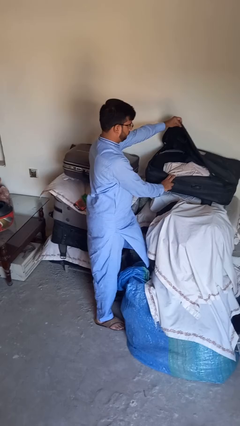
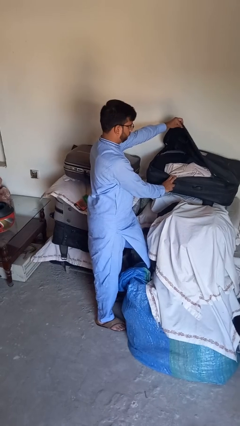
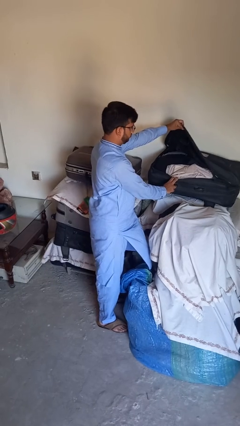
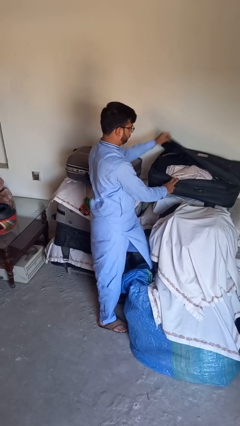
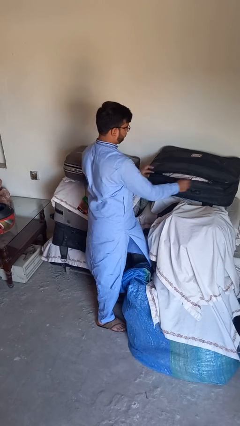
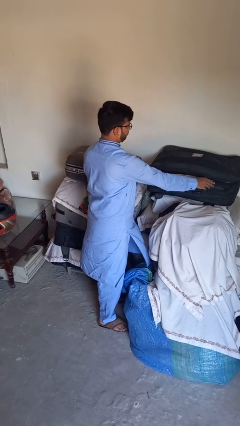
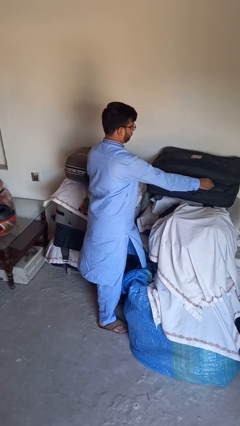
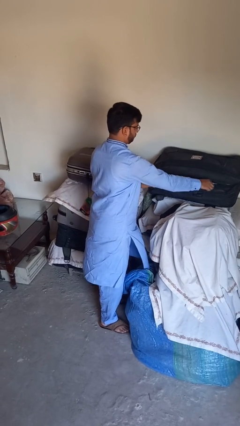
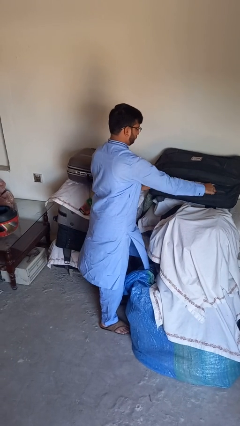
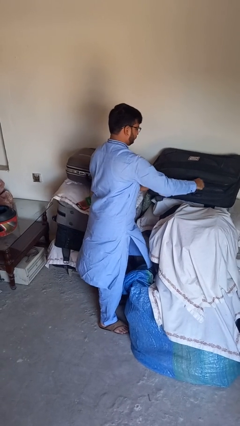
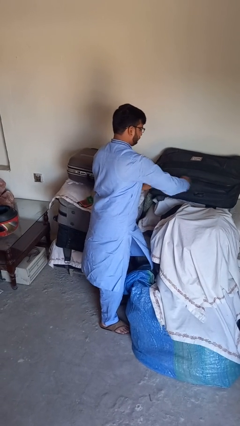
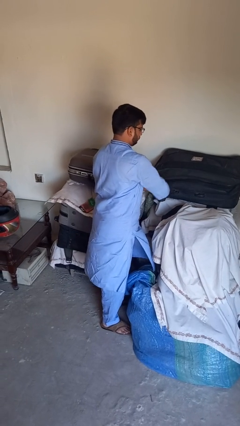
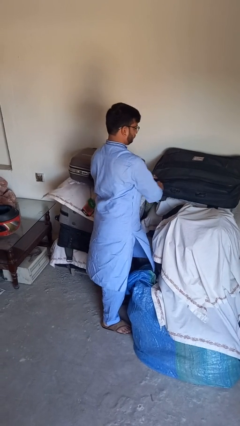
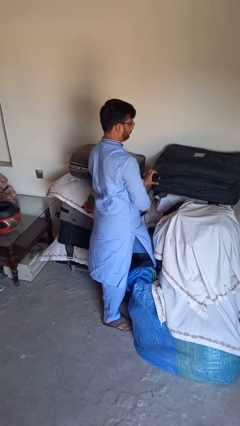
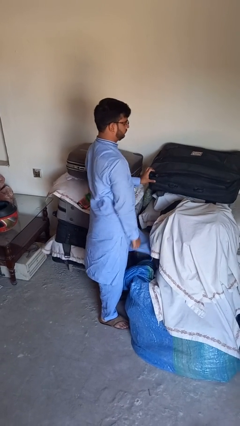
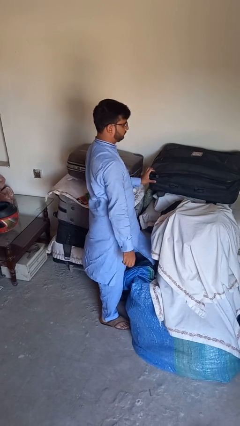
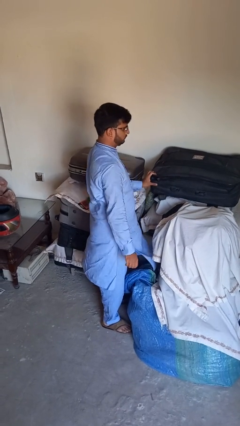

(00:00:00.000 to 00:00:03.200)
person closes suitcase

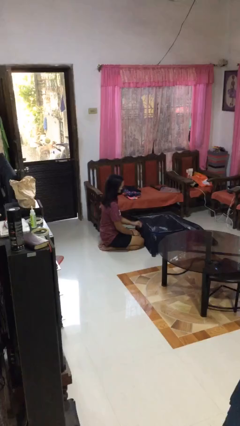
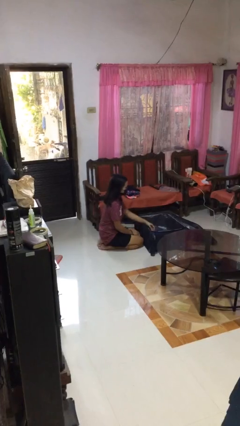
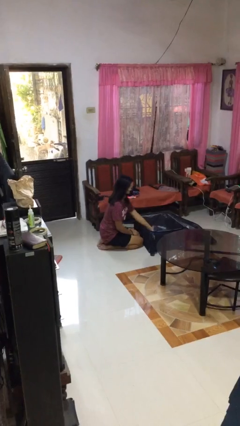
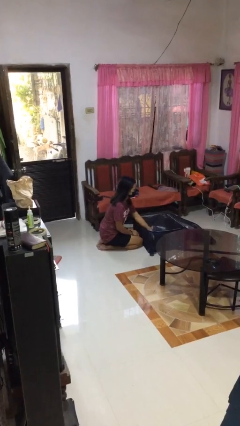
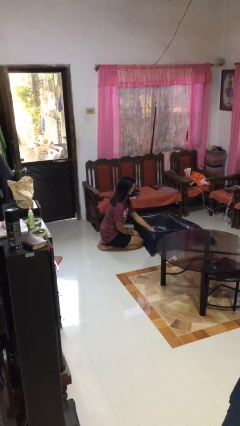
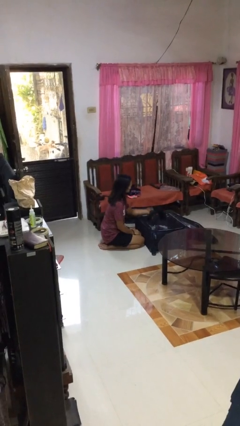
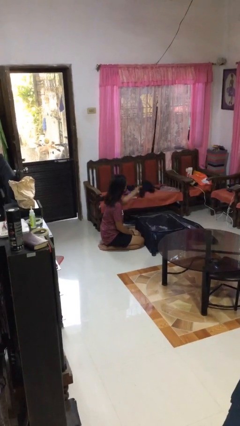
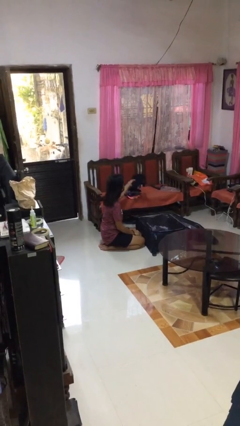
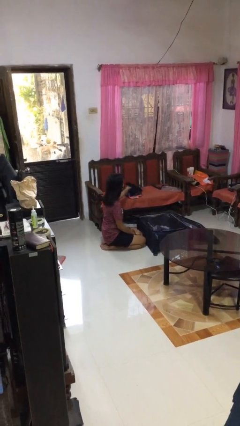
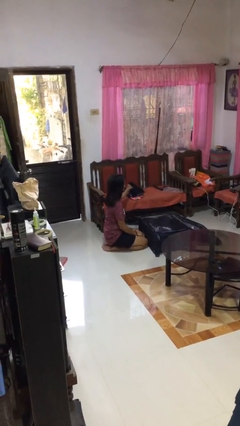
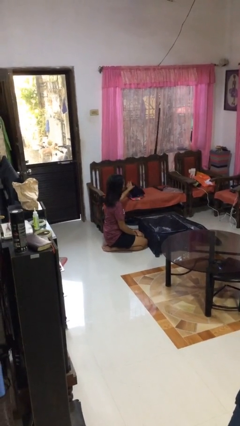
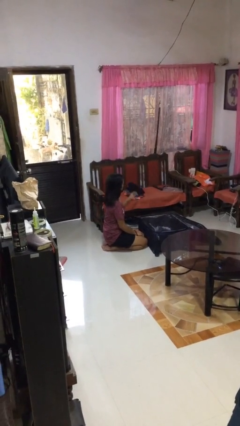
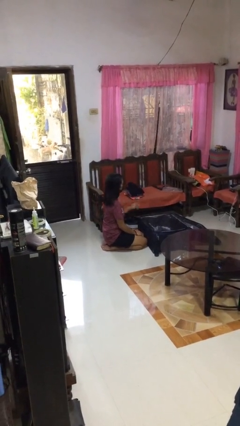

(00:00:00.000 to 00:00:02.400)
person unloads clothes from suitcase

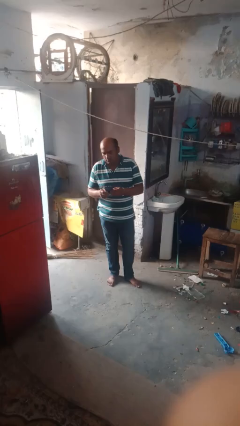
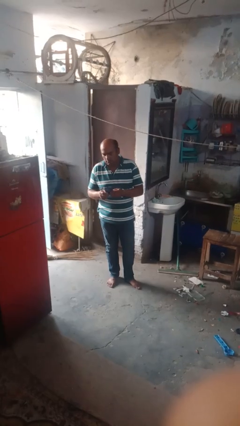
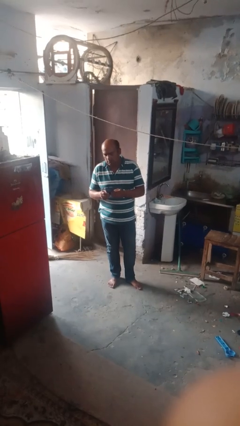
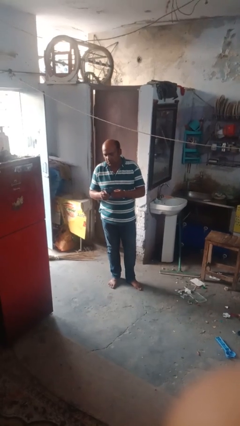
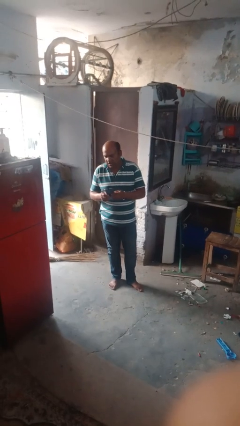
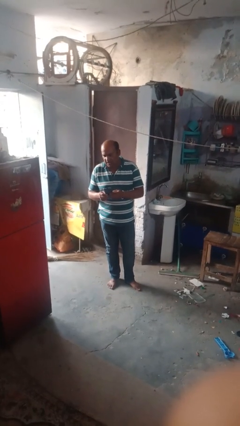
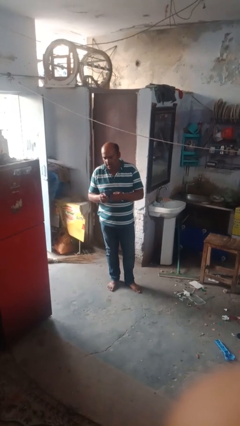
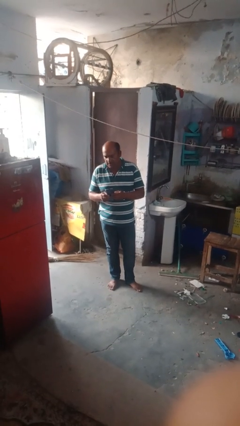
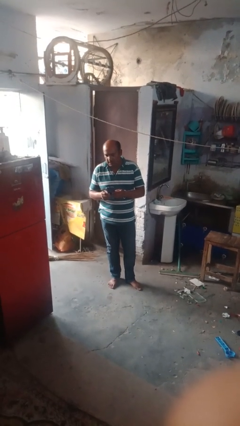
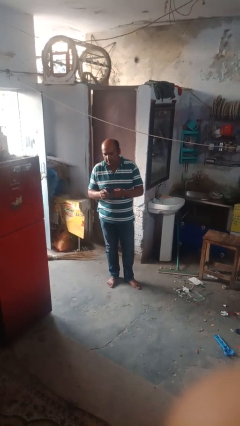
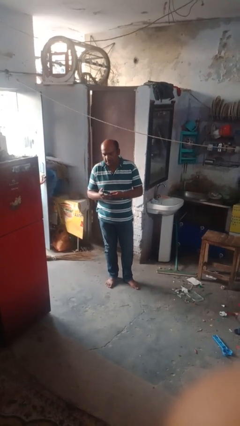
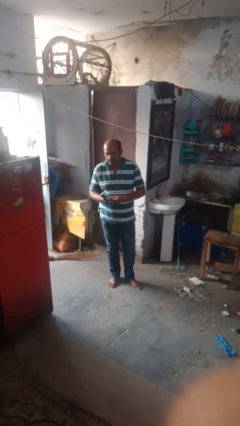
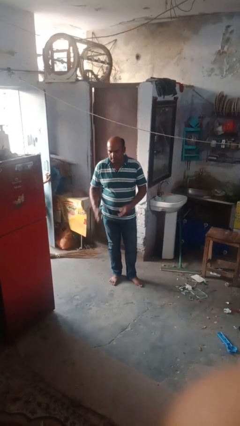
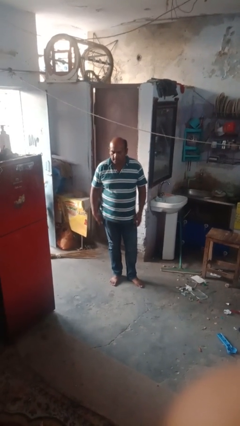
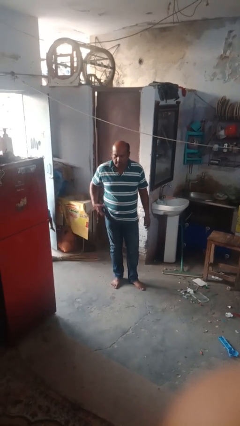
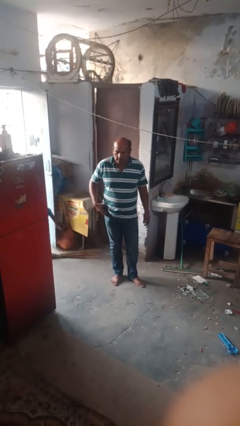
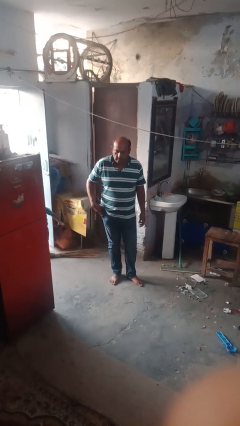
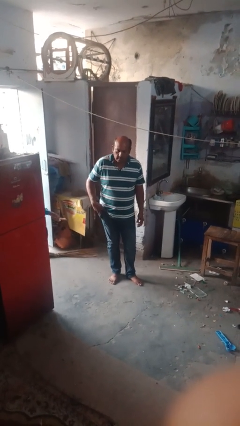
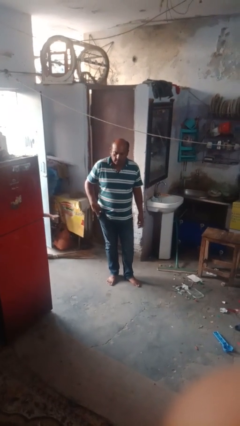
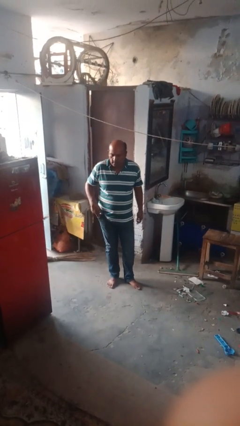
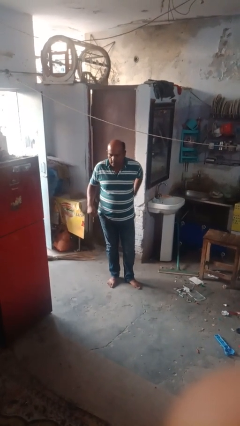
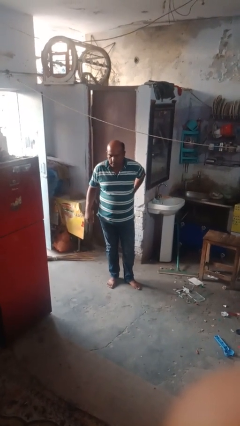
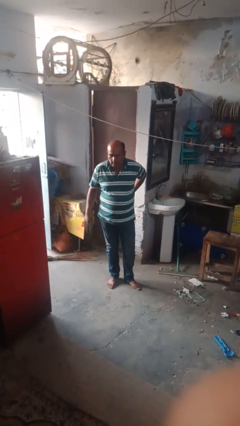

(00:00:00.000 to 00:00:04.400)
person puts phone into pocket

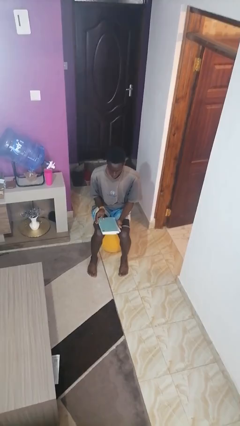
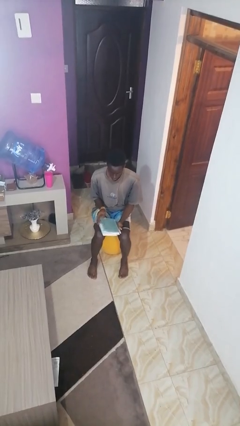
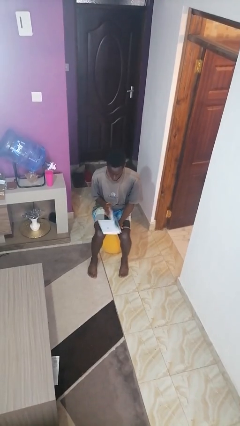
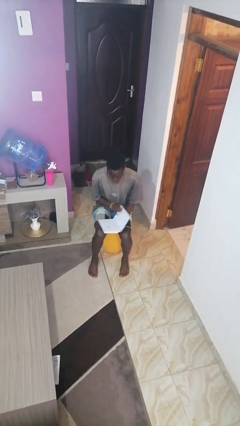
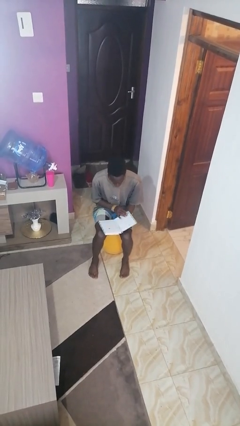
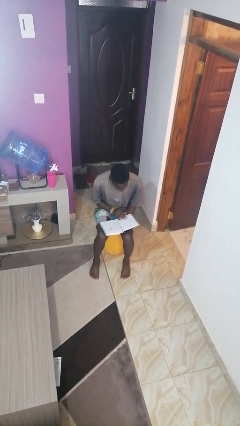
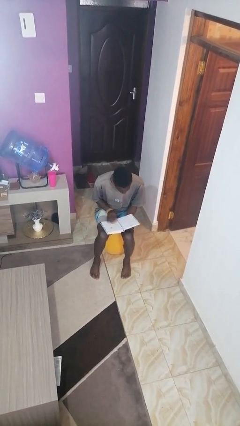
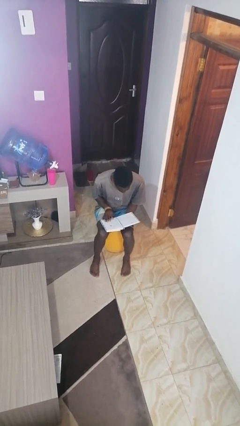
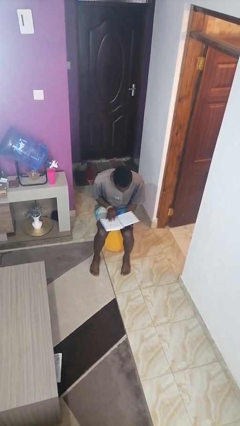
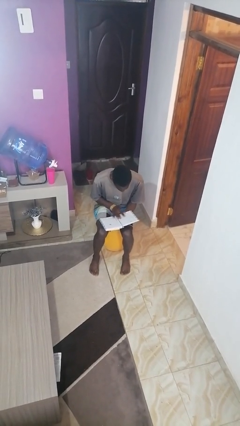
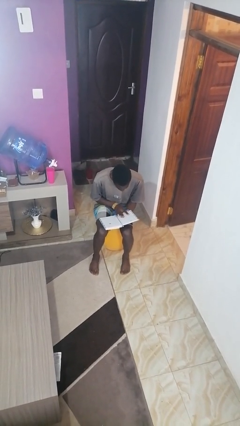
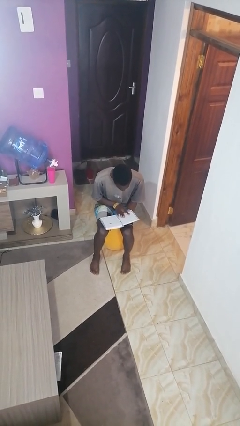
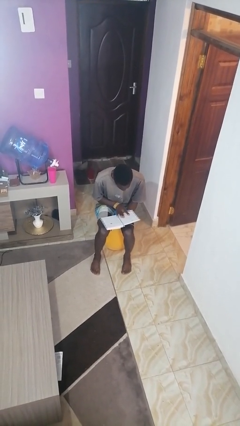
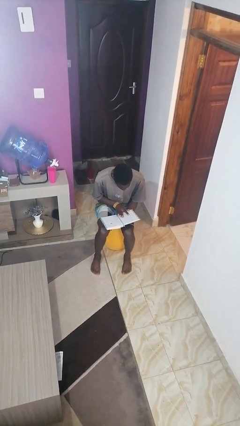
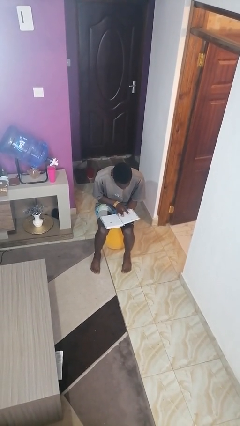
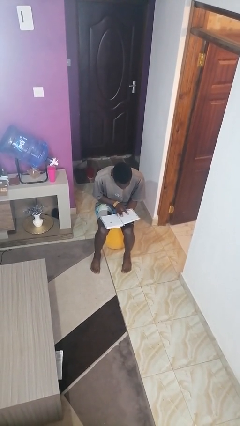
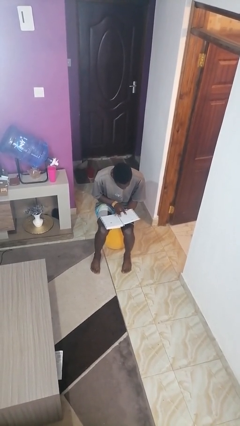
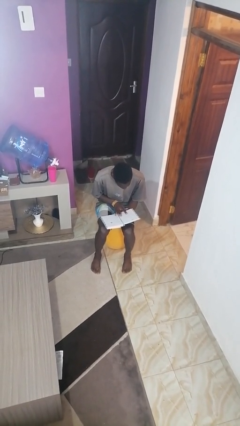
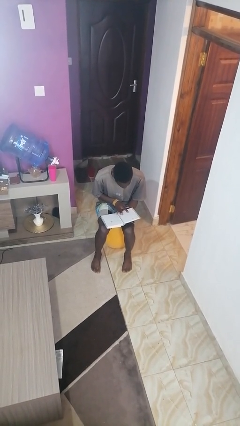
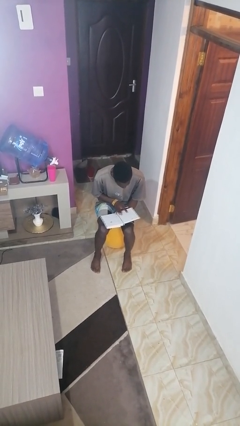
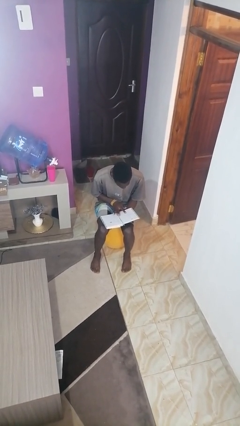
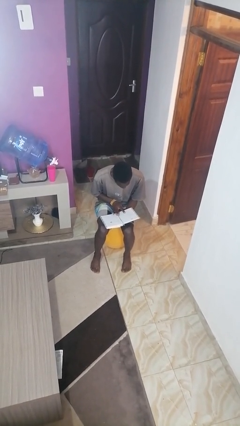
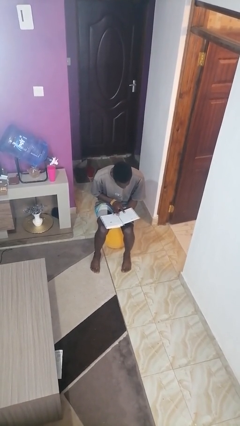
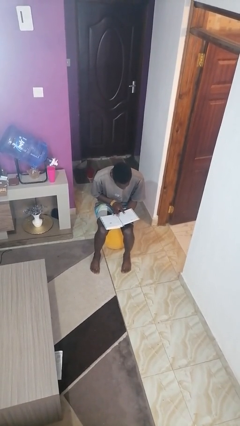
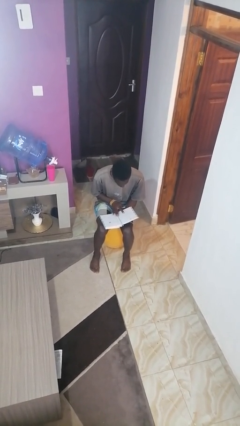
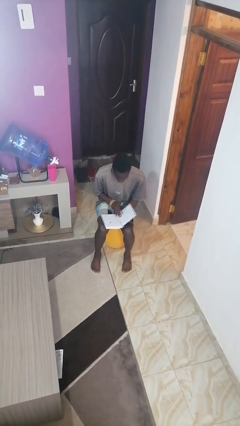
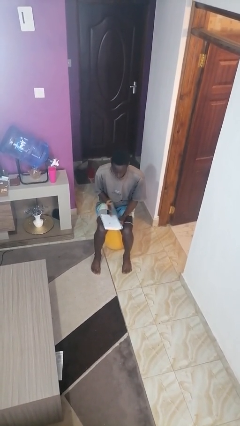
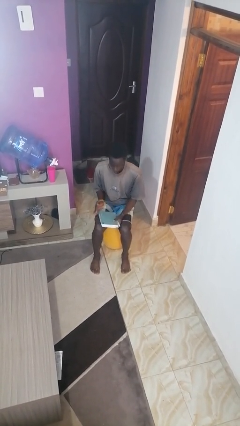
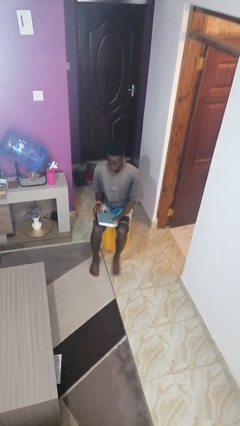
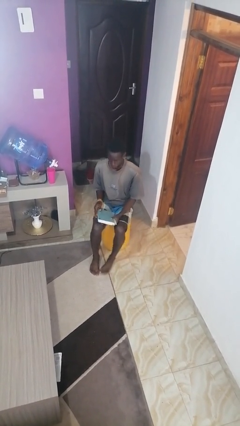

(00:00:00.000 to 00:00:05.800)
person reads book

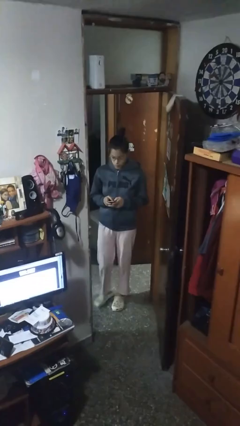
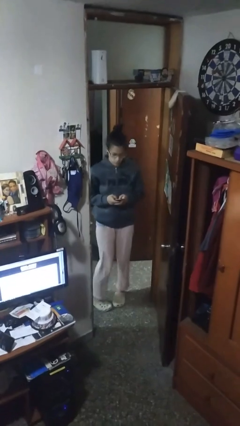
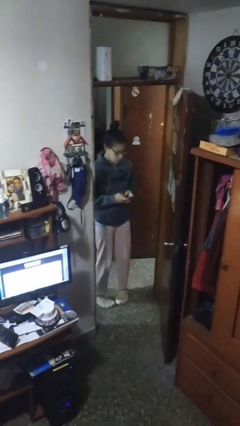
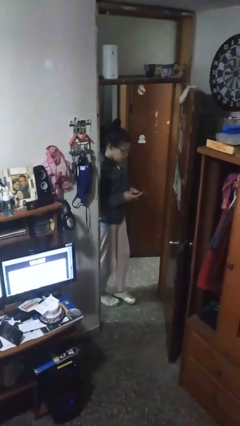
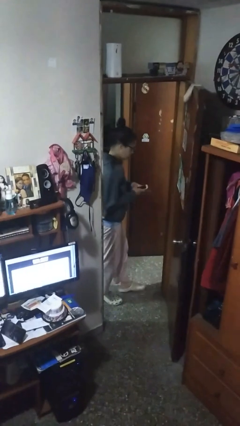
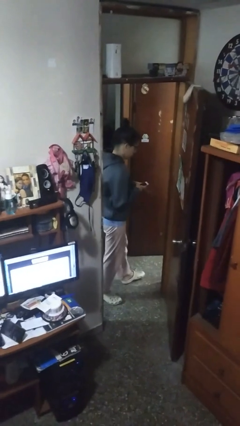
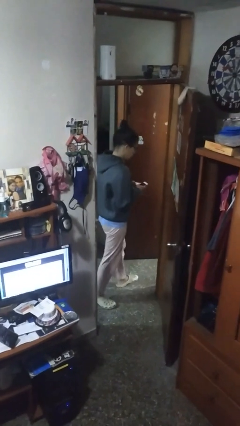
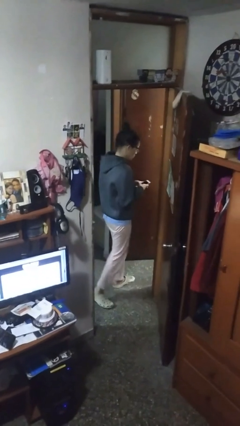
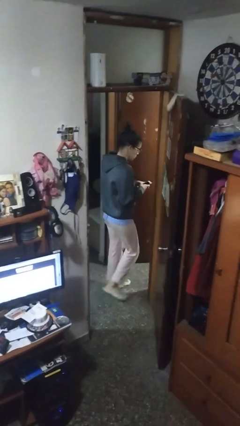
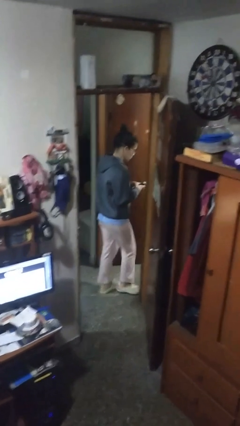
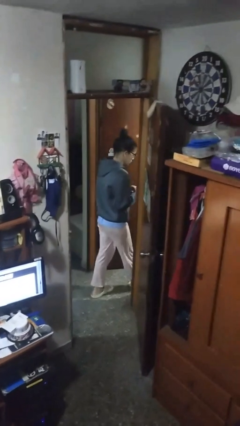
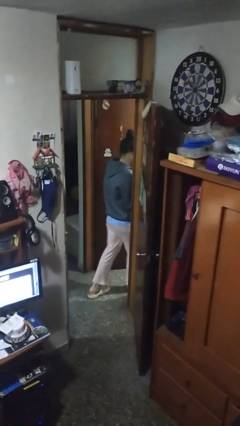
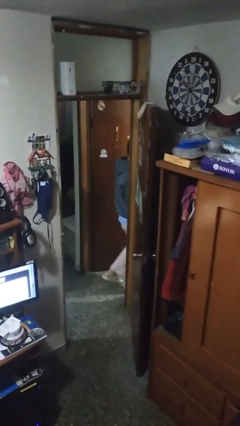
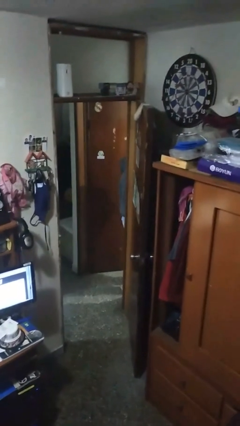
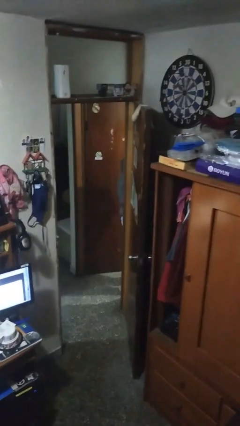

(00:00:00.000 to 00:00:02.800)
person exits scene through structure
